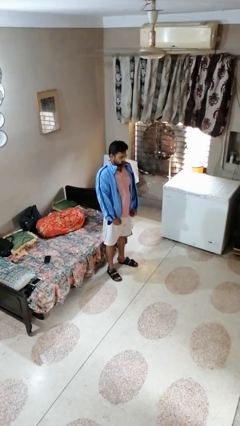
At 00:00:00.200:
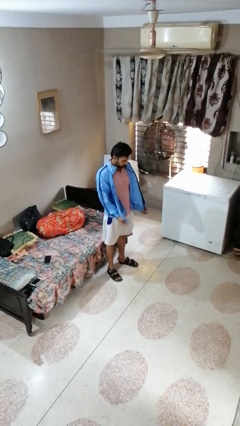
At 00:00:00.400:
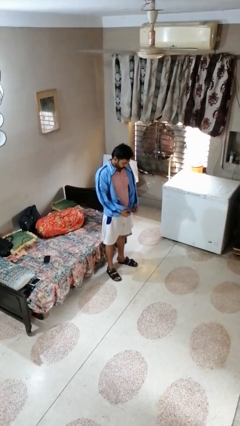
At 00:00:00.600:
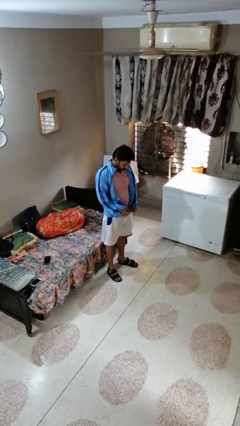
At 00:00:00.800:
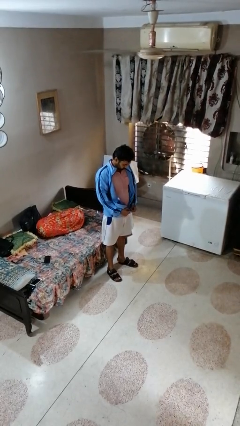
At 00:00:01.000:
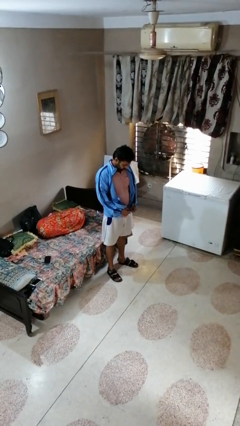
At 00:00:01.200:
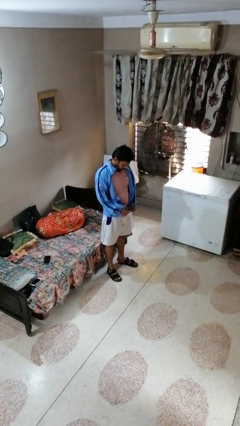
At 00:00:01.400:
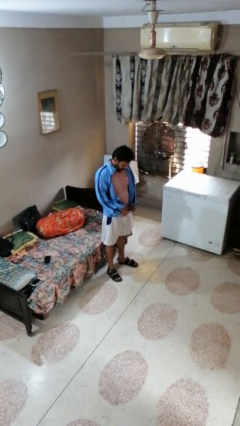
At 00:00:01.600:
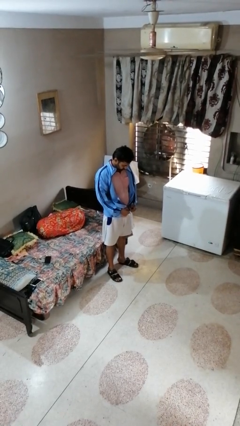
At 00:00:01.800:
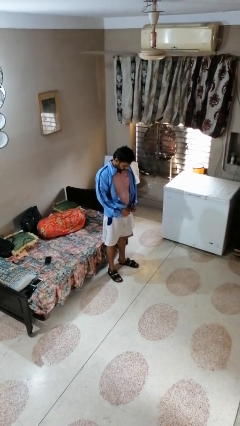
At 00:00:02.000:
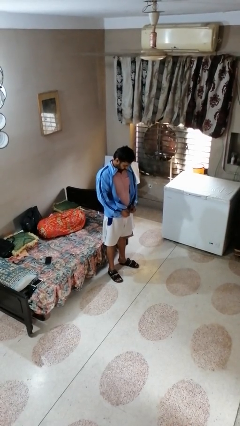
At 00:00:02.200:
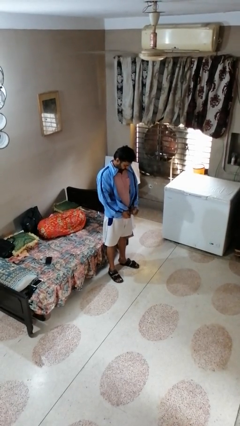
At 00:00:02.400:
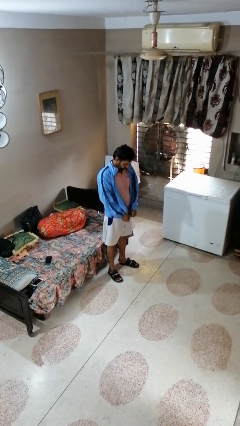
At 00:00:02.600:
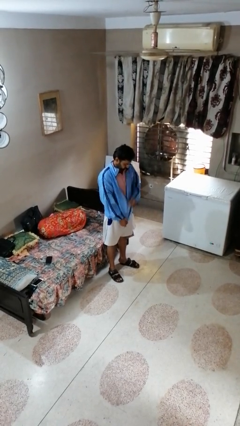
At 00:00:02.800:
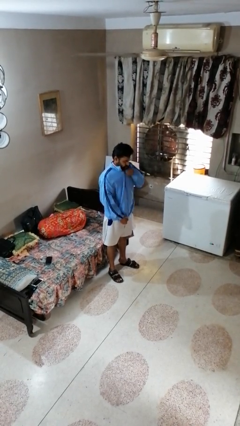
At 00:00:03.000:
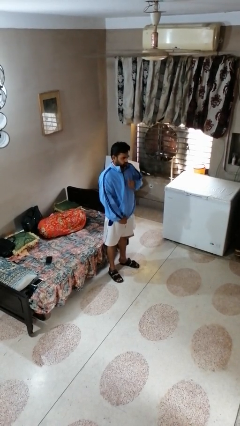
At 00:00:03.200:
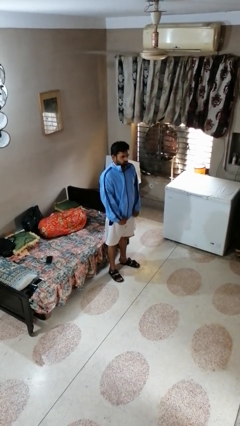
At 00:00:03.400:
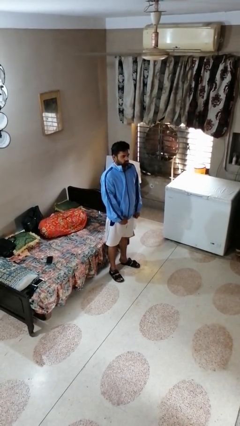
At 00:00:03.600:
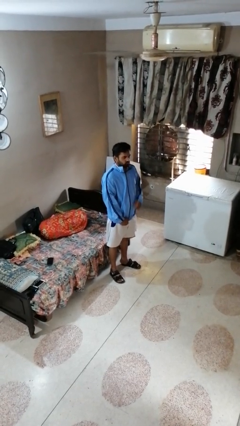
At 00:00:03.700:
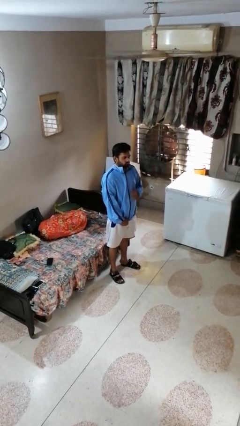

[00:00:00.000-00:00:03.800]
person zips up jacket

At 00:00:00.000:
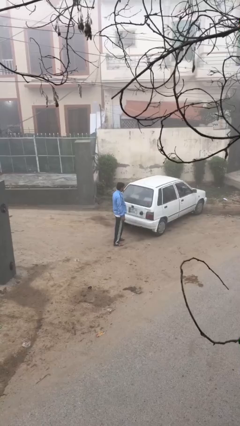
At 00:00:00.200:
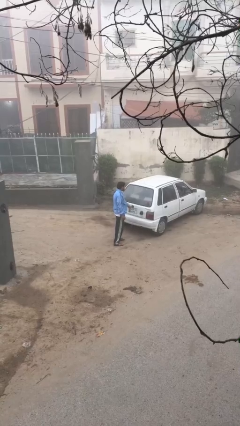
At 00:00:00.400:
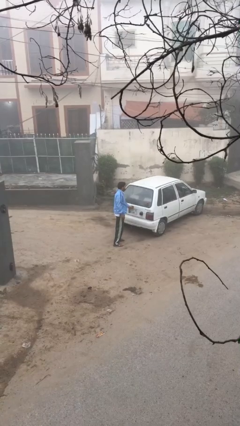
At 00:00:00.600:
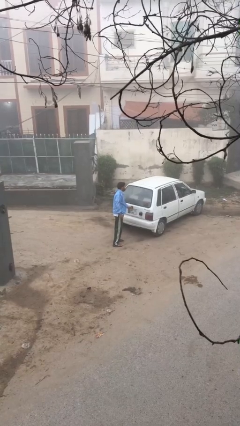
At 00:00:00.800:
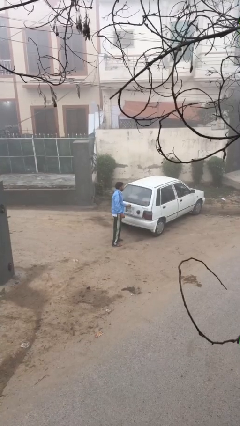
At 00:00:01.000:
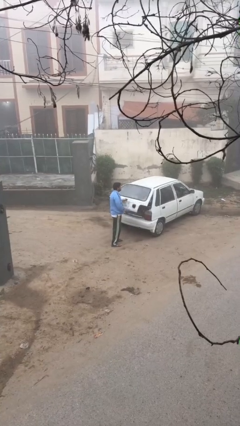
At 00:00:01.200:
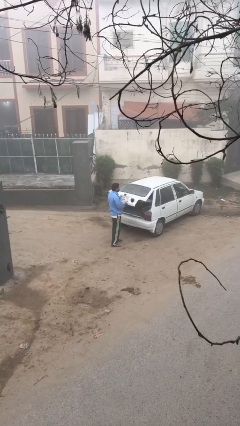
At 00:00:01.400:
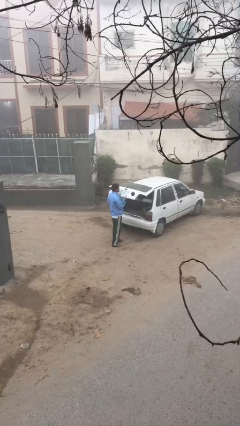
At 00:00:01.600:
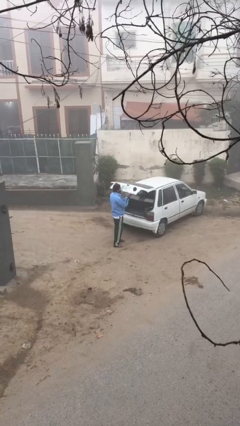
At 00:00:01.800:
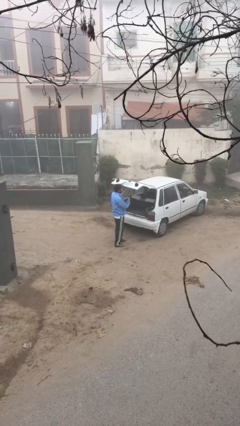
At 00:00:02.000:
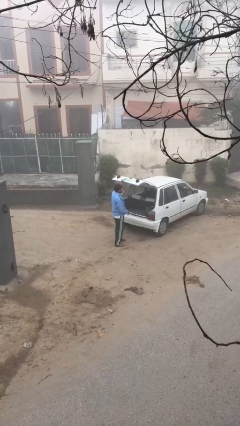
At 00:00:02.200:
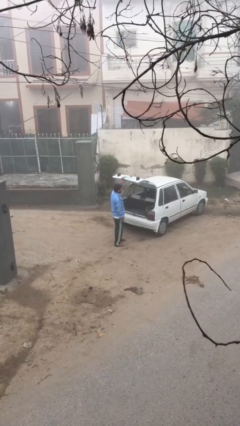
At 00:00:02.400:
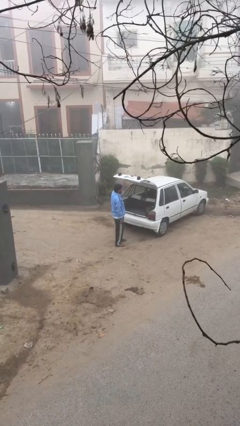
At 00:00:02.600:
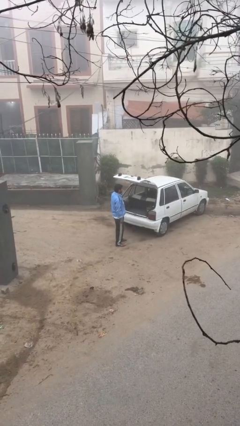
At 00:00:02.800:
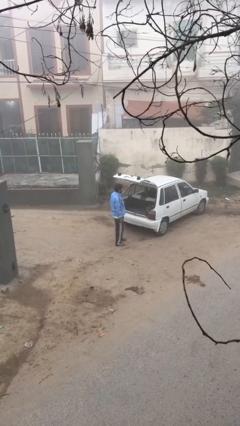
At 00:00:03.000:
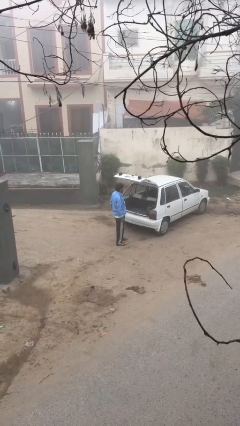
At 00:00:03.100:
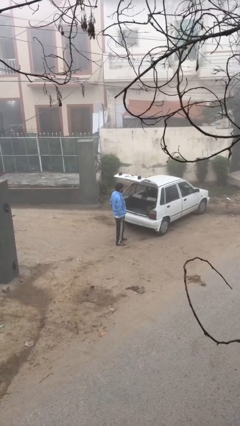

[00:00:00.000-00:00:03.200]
person opens car trunk

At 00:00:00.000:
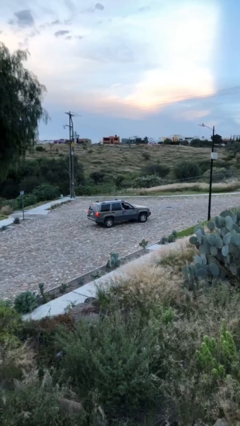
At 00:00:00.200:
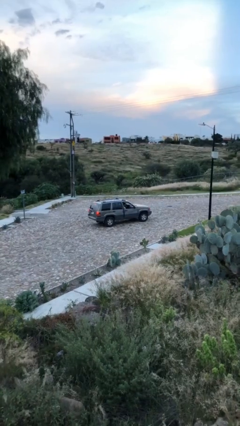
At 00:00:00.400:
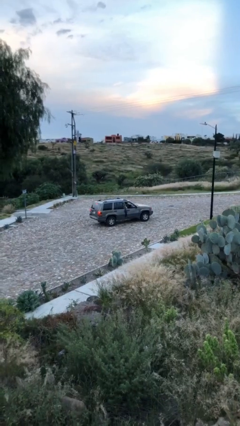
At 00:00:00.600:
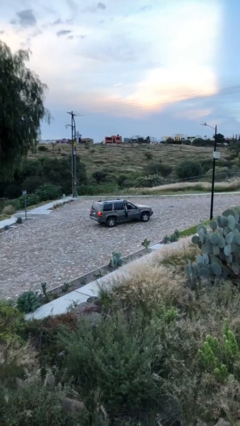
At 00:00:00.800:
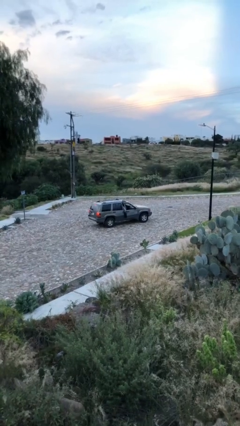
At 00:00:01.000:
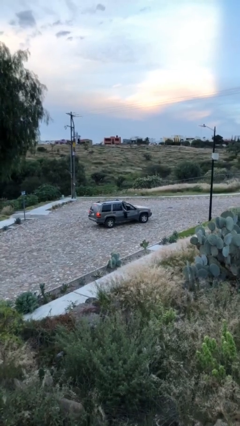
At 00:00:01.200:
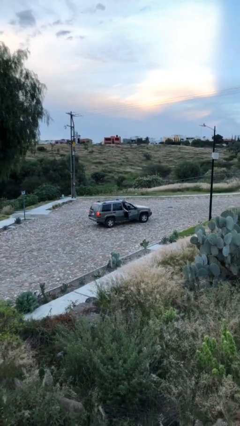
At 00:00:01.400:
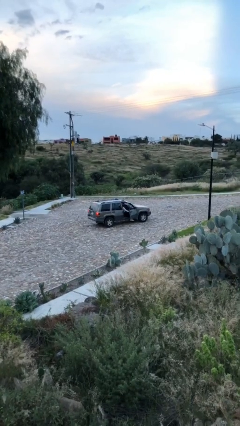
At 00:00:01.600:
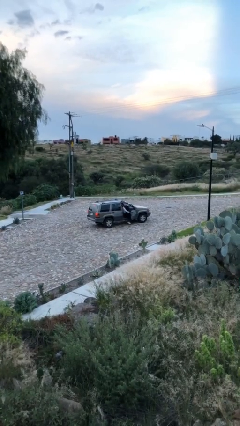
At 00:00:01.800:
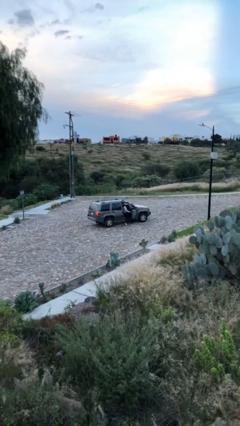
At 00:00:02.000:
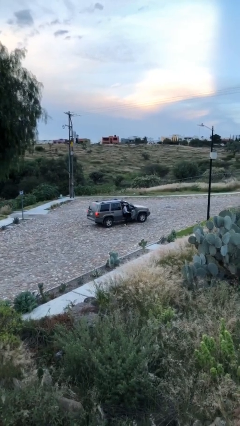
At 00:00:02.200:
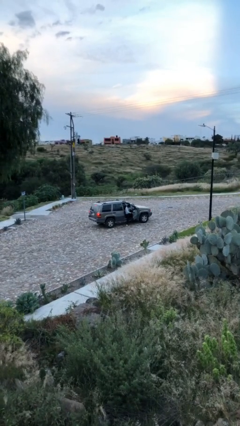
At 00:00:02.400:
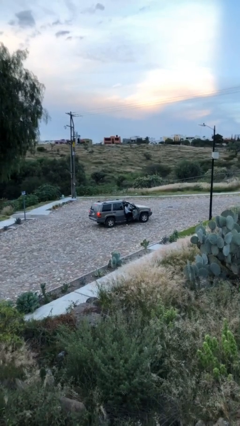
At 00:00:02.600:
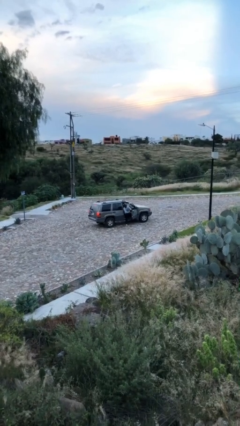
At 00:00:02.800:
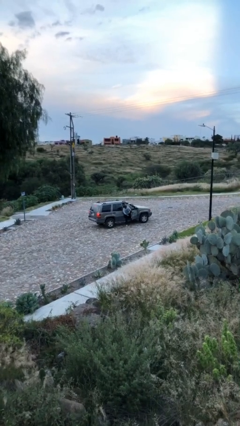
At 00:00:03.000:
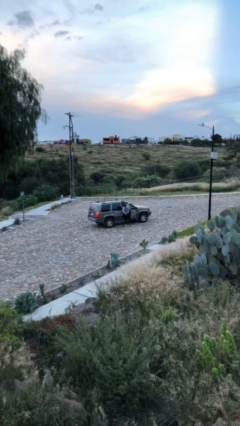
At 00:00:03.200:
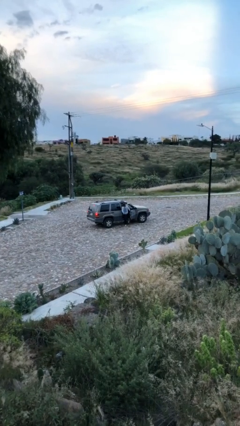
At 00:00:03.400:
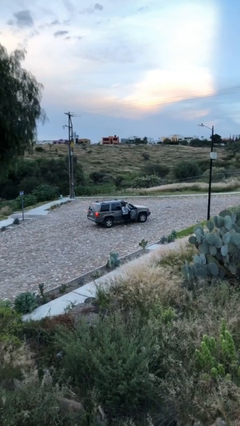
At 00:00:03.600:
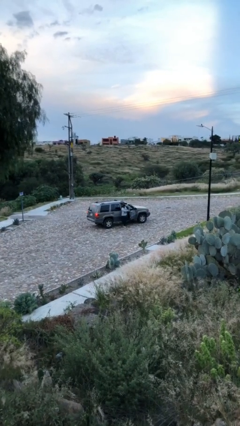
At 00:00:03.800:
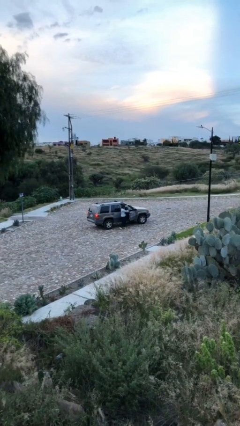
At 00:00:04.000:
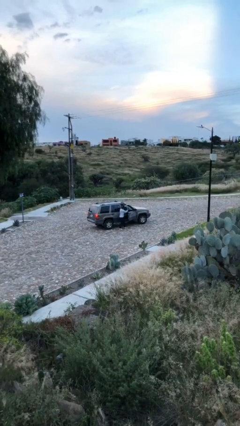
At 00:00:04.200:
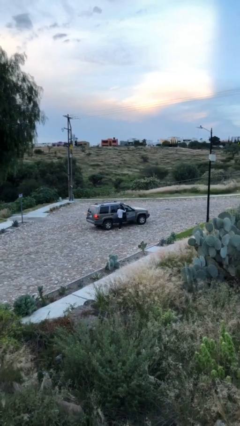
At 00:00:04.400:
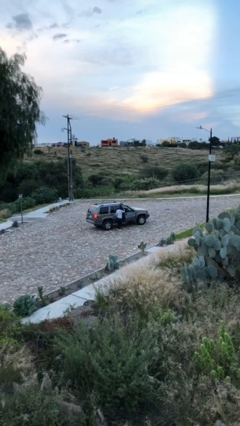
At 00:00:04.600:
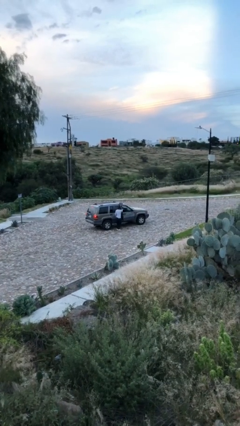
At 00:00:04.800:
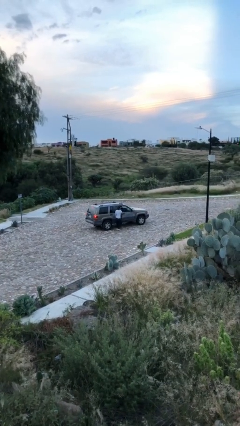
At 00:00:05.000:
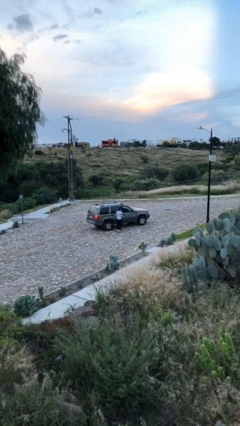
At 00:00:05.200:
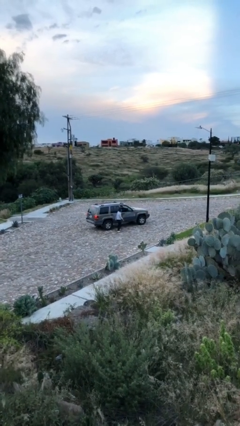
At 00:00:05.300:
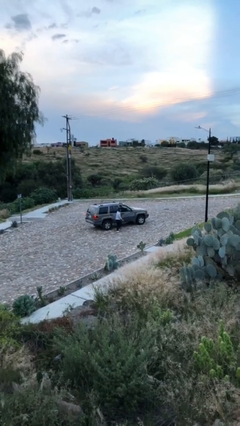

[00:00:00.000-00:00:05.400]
car drops off person

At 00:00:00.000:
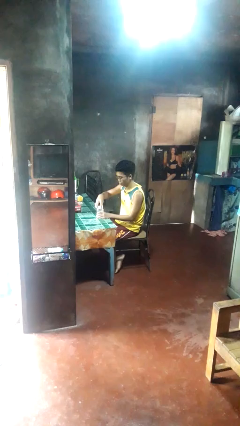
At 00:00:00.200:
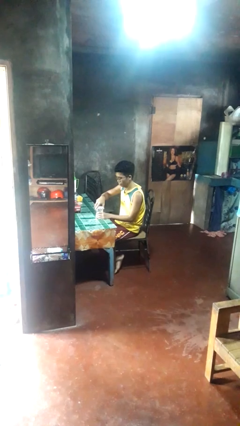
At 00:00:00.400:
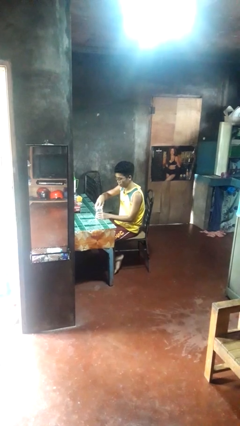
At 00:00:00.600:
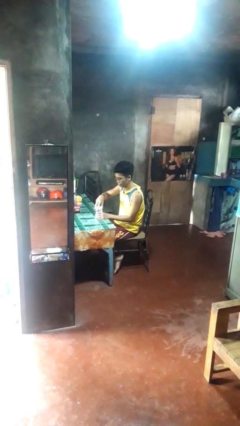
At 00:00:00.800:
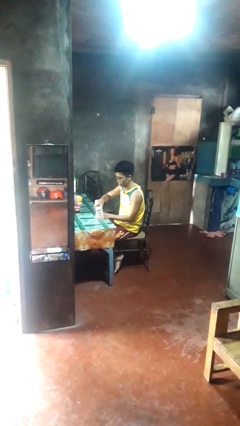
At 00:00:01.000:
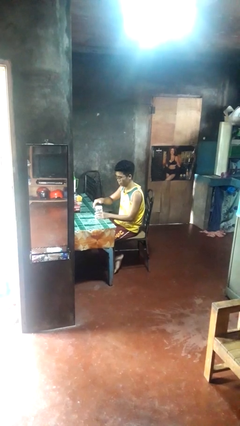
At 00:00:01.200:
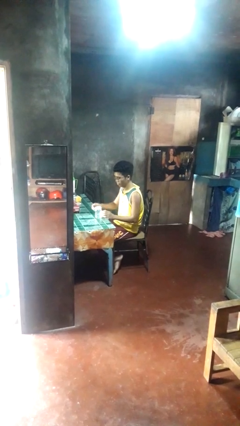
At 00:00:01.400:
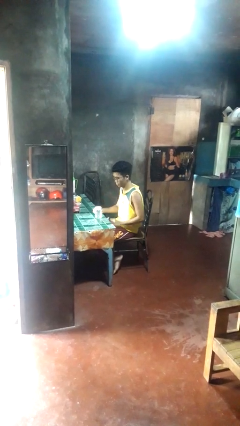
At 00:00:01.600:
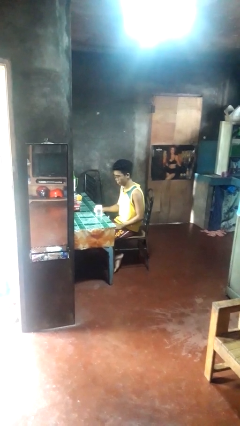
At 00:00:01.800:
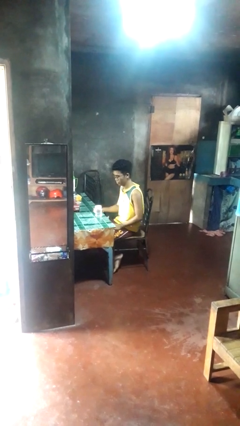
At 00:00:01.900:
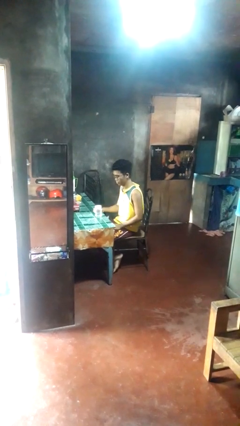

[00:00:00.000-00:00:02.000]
person closes jar

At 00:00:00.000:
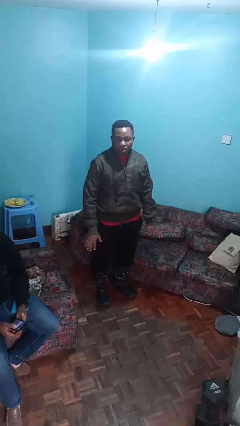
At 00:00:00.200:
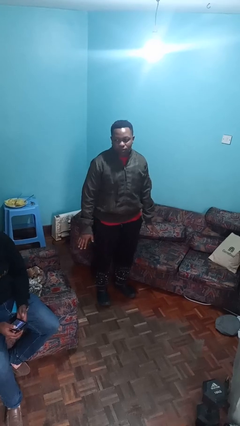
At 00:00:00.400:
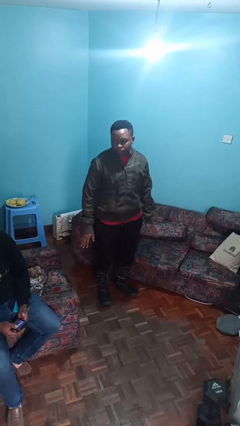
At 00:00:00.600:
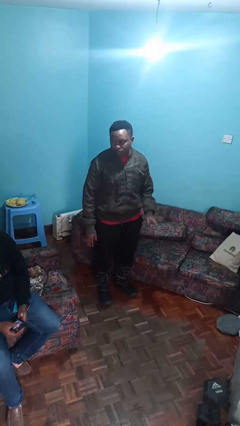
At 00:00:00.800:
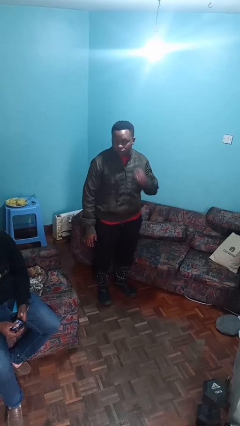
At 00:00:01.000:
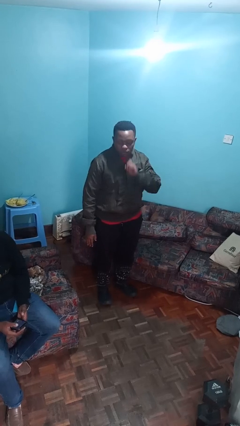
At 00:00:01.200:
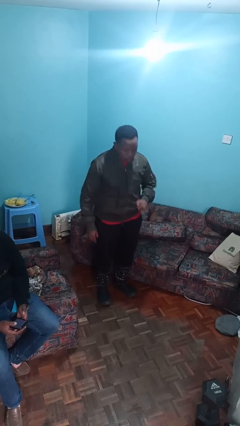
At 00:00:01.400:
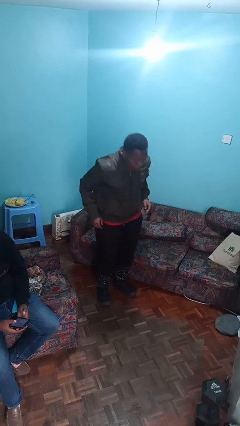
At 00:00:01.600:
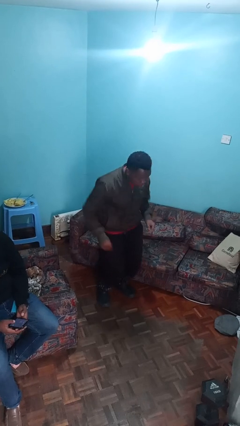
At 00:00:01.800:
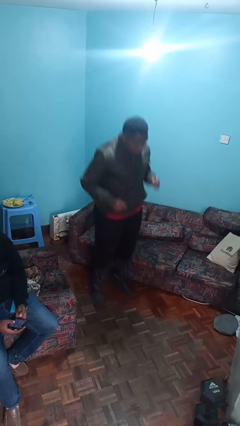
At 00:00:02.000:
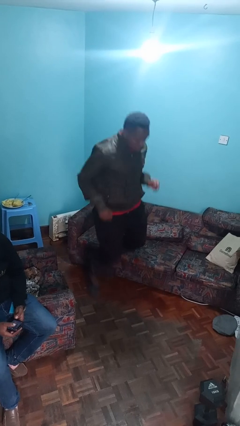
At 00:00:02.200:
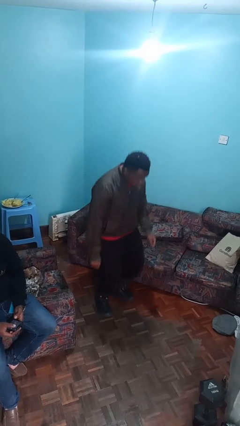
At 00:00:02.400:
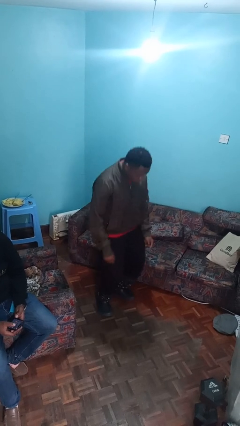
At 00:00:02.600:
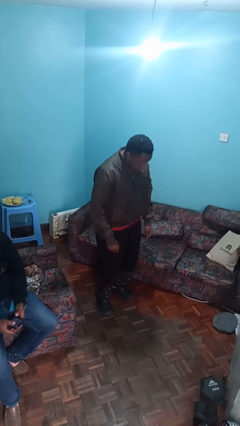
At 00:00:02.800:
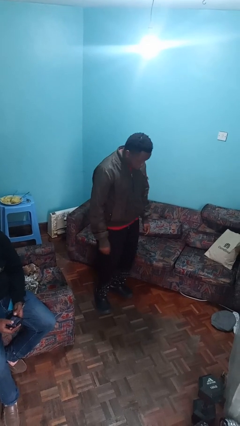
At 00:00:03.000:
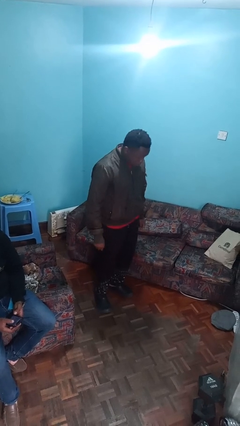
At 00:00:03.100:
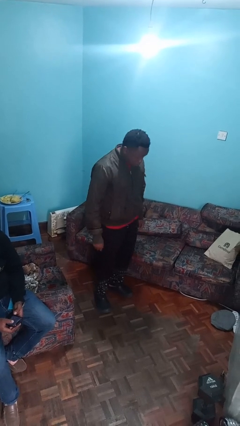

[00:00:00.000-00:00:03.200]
person jumps
